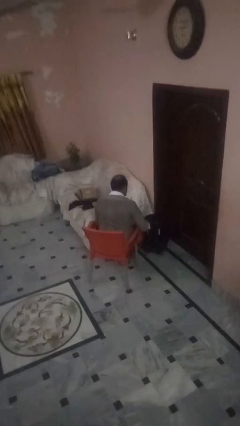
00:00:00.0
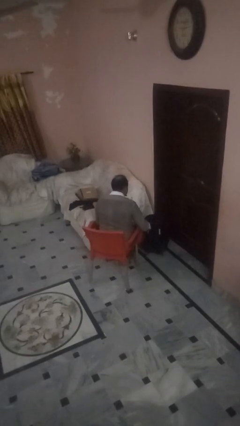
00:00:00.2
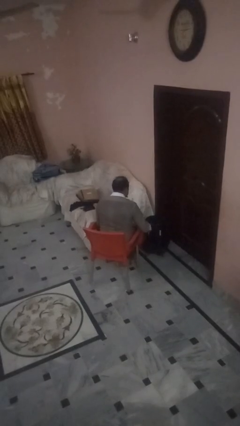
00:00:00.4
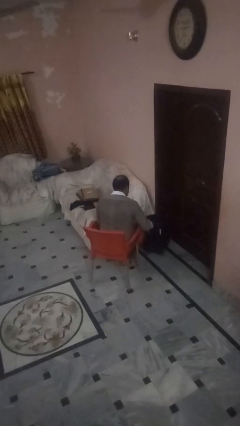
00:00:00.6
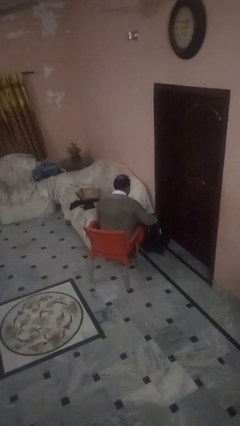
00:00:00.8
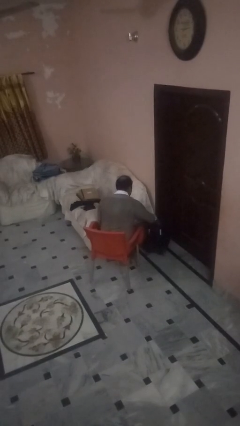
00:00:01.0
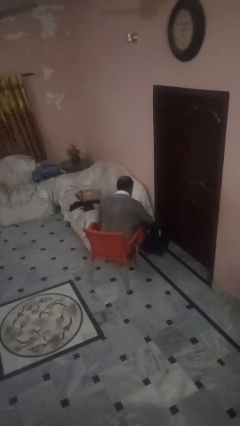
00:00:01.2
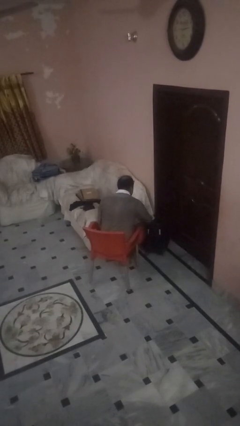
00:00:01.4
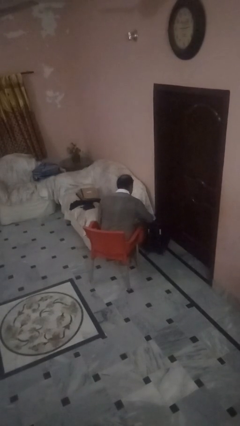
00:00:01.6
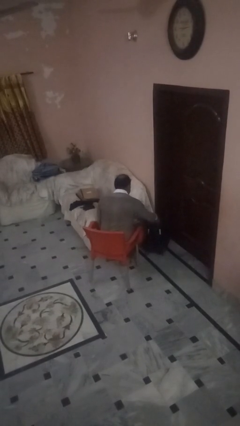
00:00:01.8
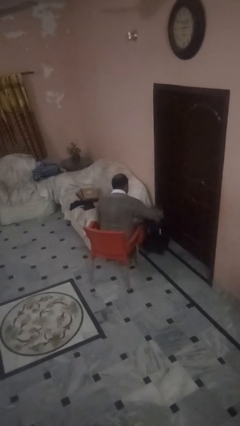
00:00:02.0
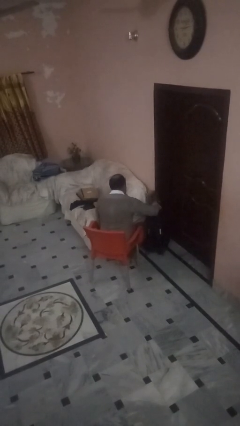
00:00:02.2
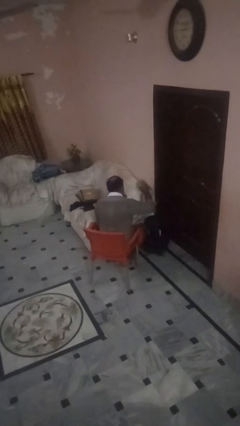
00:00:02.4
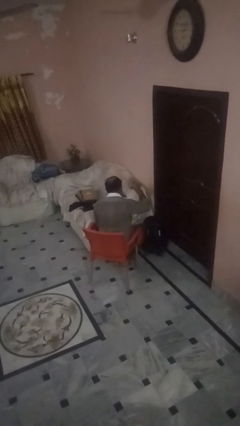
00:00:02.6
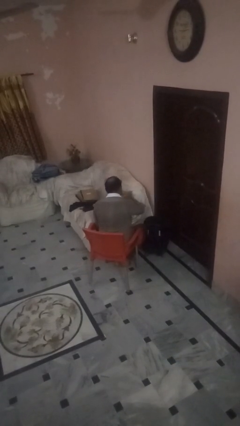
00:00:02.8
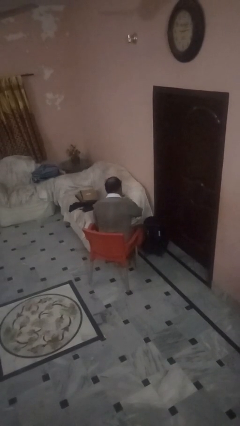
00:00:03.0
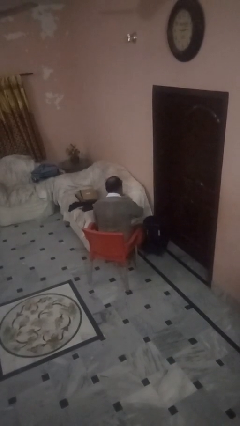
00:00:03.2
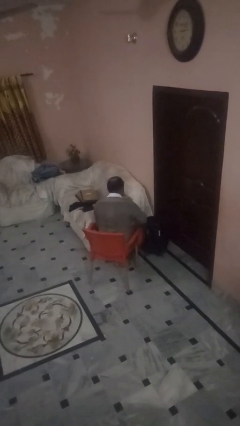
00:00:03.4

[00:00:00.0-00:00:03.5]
person unloads clothes from suitcase

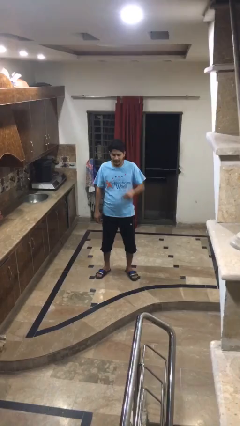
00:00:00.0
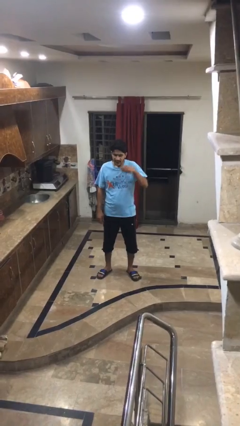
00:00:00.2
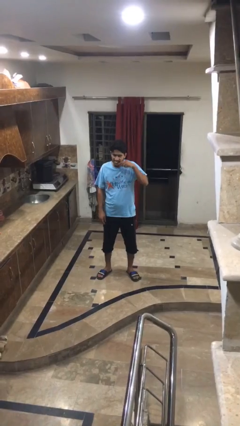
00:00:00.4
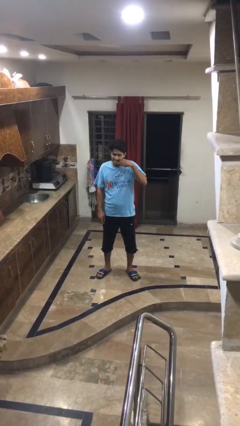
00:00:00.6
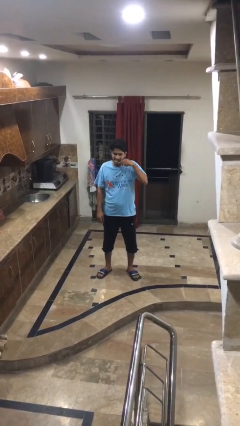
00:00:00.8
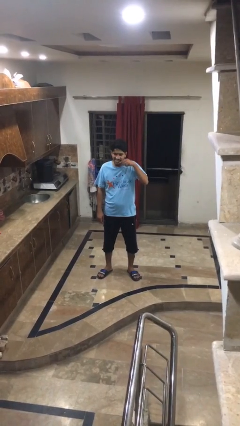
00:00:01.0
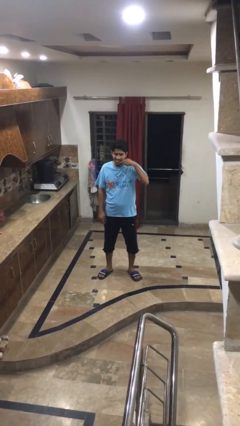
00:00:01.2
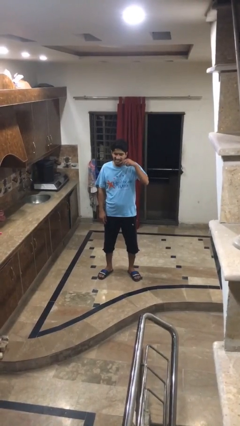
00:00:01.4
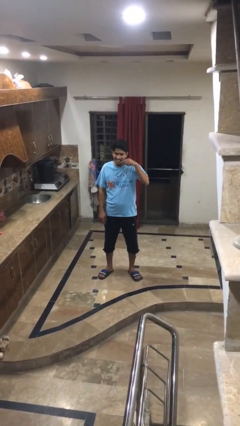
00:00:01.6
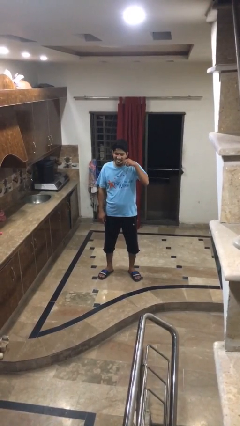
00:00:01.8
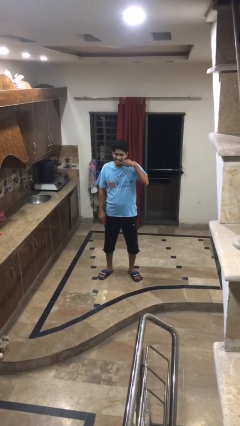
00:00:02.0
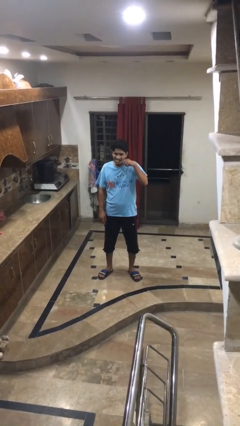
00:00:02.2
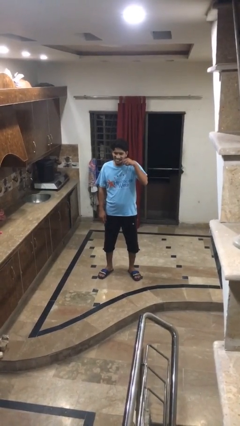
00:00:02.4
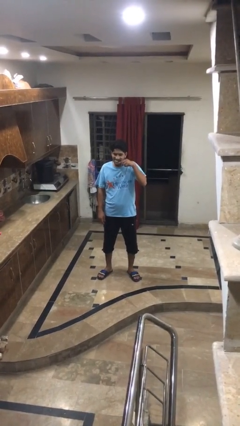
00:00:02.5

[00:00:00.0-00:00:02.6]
person brushes teeth

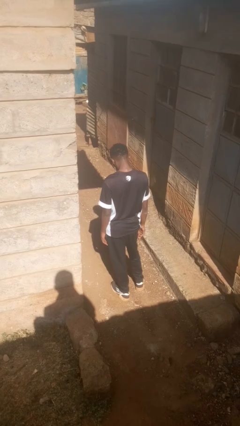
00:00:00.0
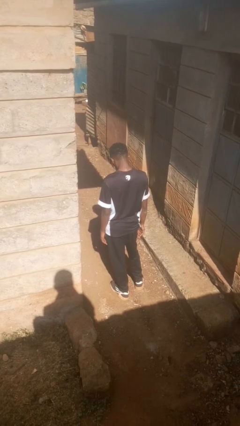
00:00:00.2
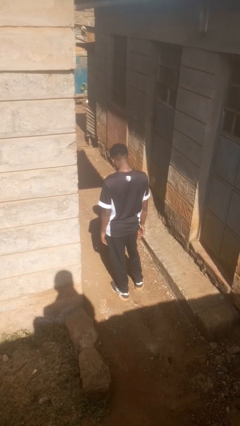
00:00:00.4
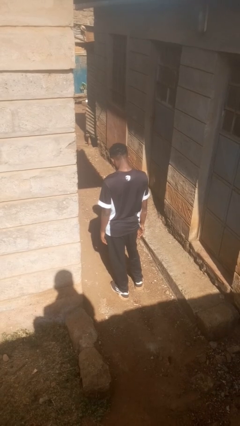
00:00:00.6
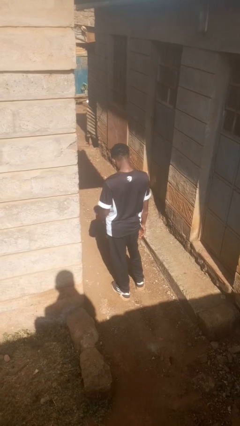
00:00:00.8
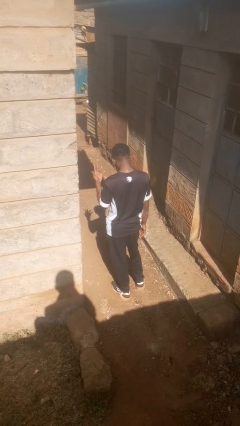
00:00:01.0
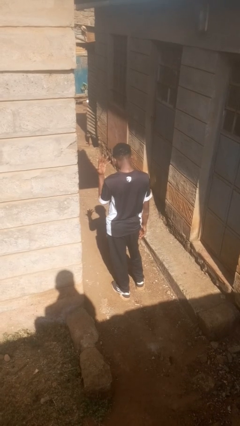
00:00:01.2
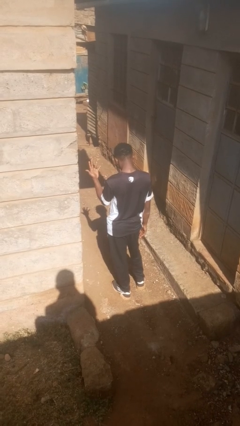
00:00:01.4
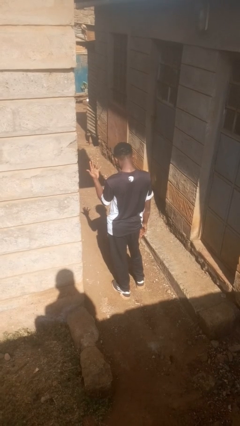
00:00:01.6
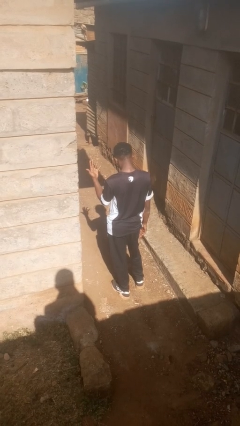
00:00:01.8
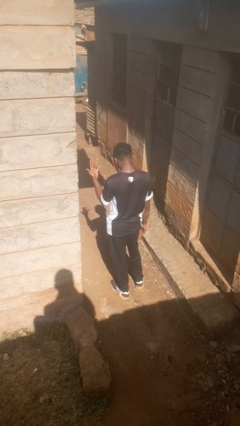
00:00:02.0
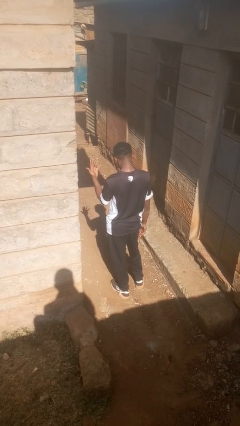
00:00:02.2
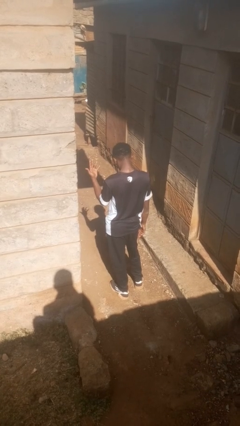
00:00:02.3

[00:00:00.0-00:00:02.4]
person gestures number five

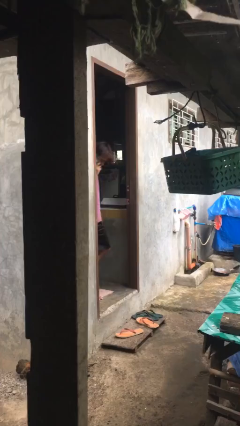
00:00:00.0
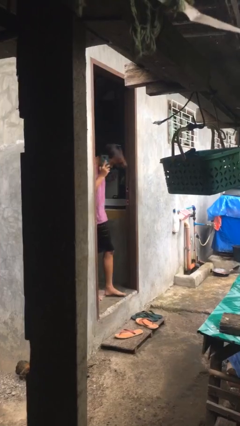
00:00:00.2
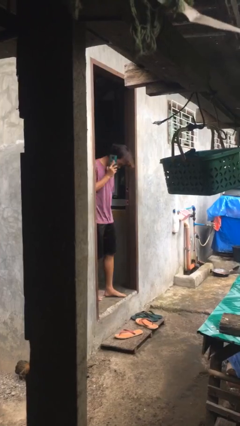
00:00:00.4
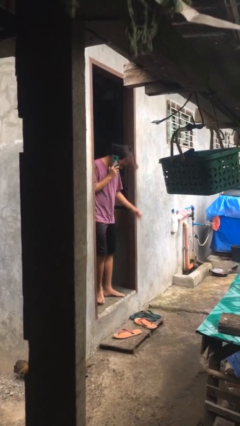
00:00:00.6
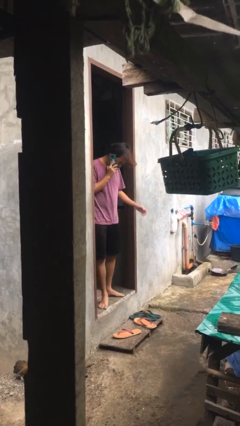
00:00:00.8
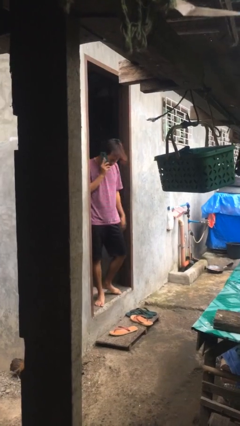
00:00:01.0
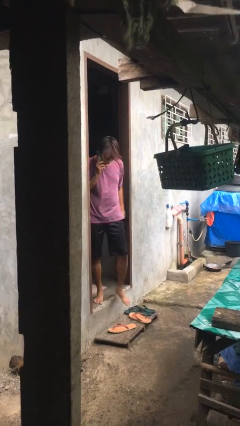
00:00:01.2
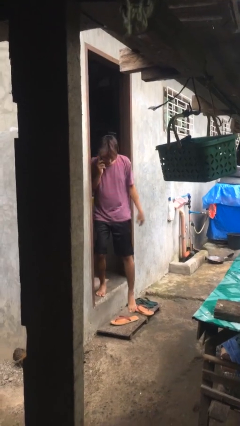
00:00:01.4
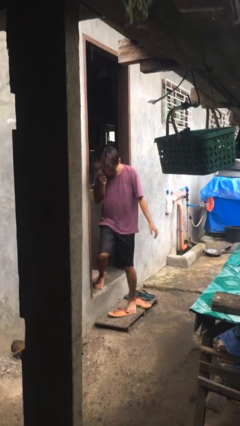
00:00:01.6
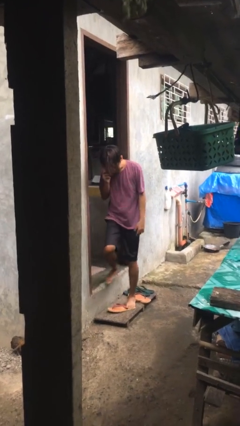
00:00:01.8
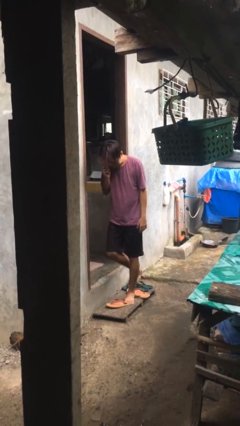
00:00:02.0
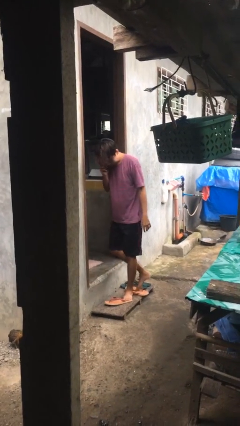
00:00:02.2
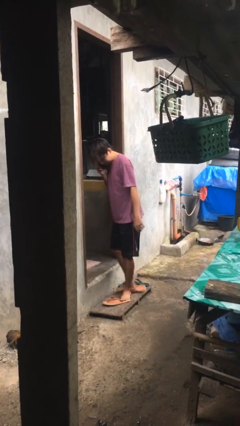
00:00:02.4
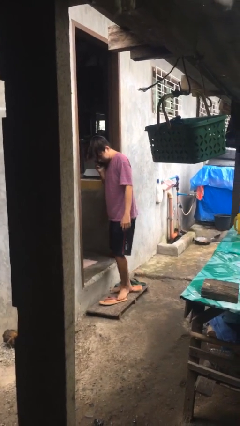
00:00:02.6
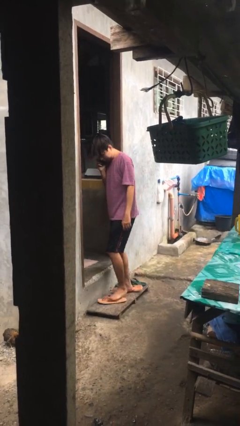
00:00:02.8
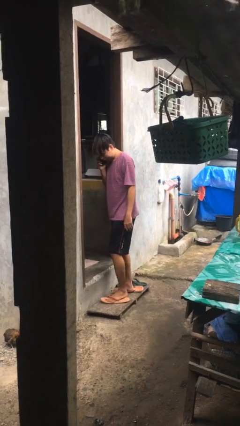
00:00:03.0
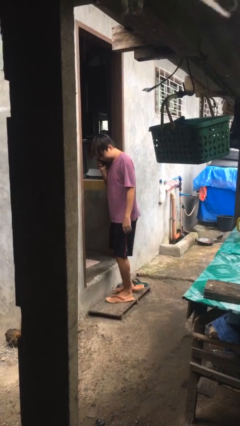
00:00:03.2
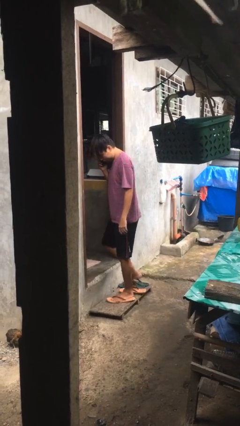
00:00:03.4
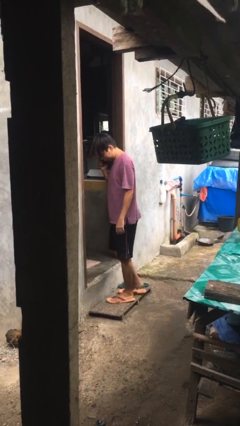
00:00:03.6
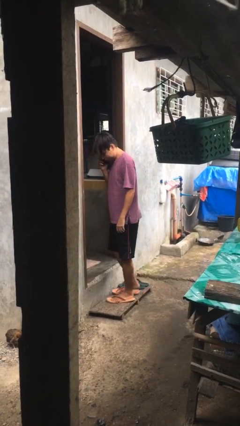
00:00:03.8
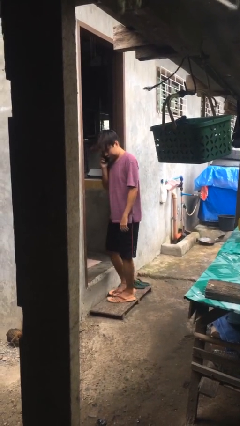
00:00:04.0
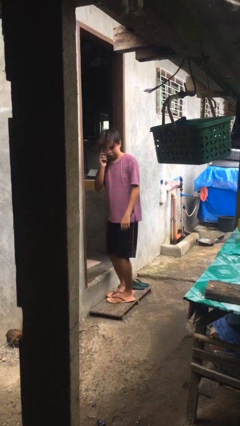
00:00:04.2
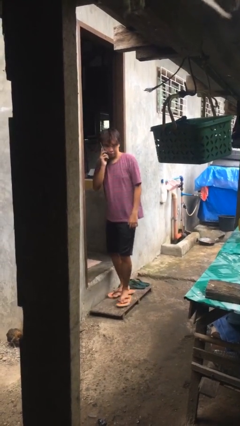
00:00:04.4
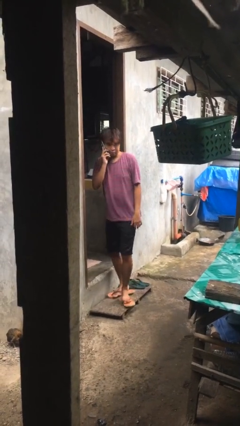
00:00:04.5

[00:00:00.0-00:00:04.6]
person exits scene through structure

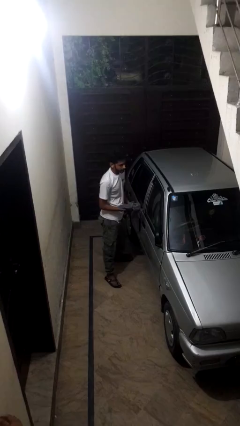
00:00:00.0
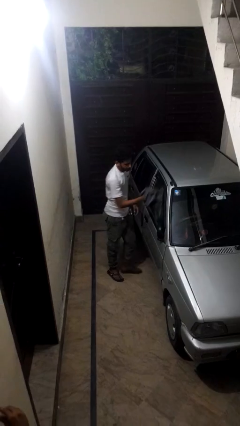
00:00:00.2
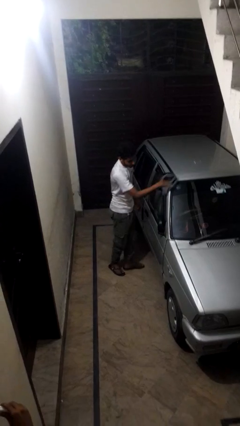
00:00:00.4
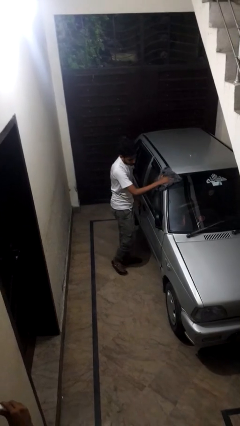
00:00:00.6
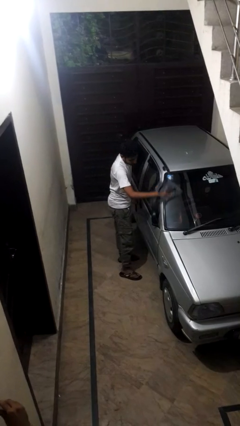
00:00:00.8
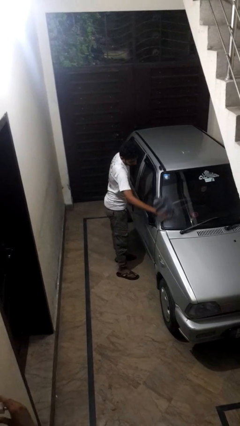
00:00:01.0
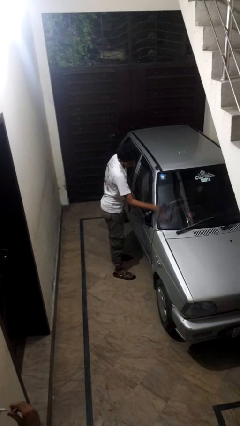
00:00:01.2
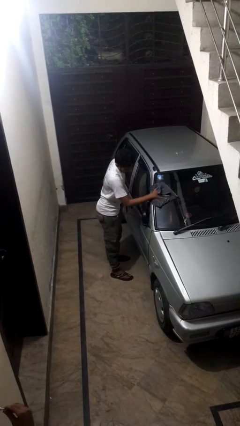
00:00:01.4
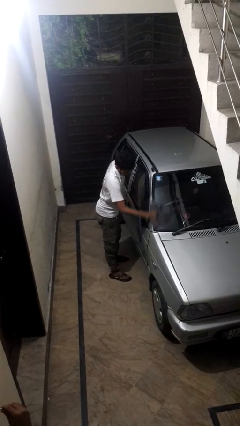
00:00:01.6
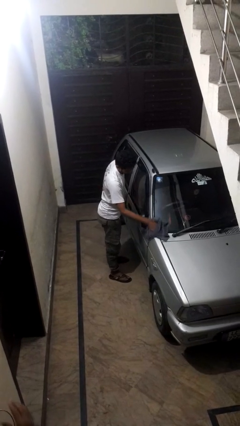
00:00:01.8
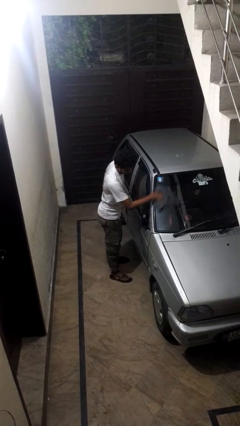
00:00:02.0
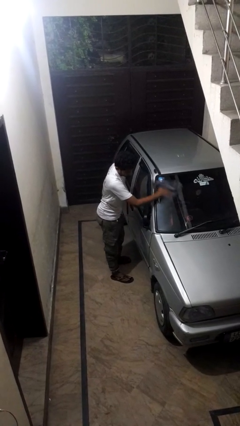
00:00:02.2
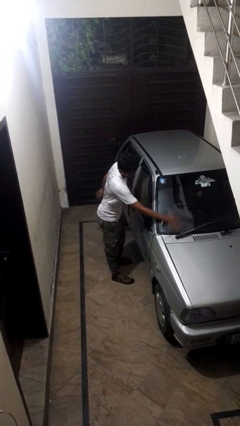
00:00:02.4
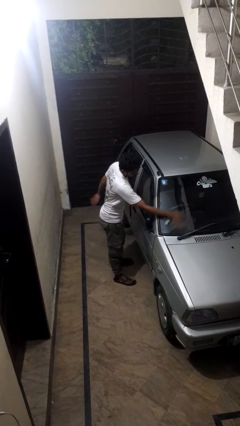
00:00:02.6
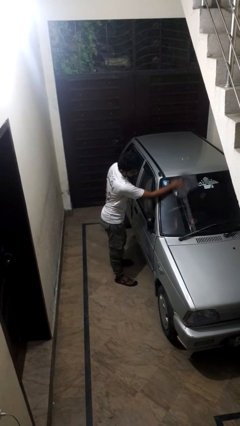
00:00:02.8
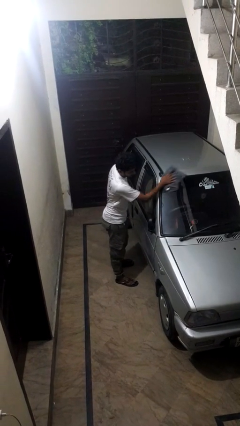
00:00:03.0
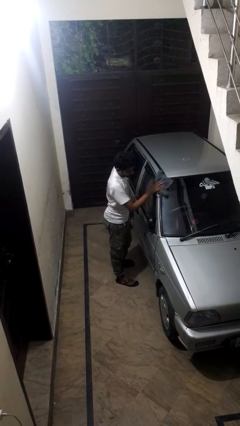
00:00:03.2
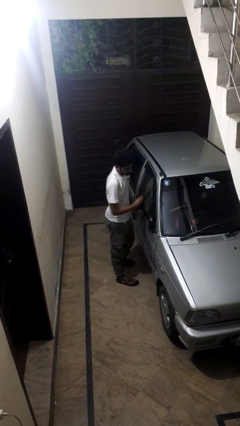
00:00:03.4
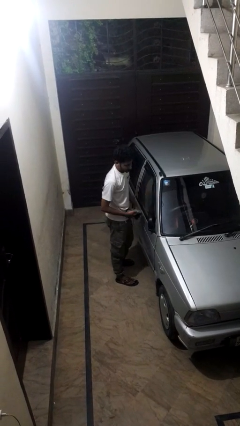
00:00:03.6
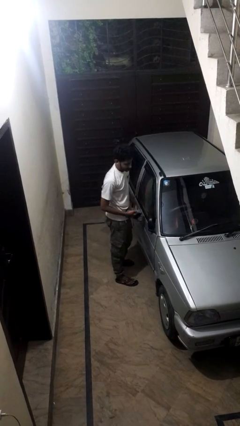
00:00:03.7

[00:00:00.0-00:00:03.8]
person polishes car with rag

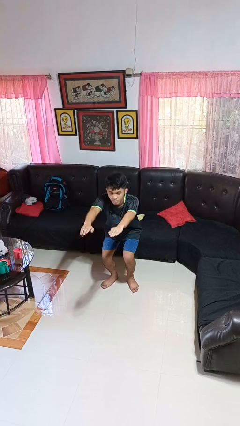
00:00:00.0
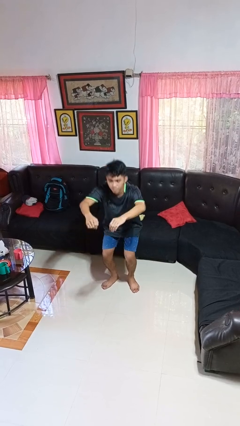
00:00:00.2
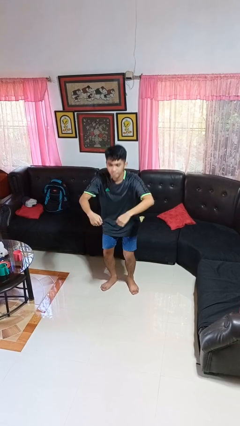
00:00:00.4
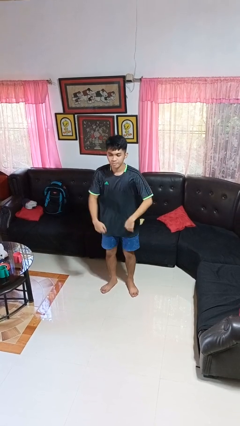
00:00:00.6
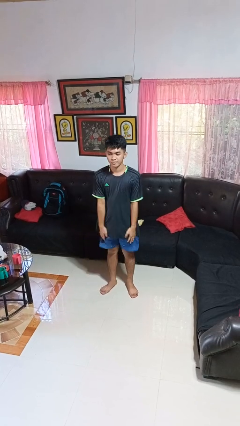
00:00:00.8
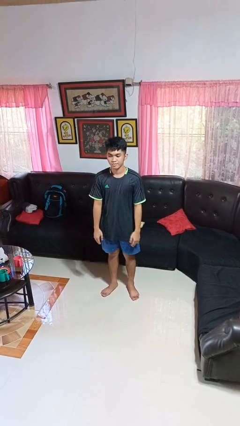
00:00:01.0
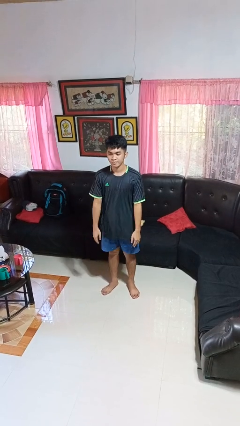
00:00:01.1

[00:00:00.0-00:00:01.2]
person stands up
